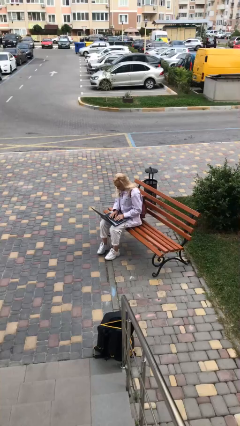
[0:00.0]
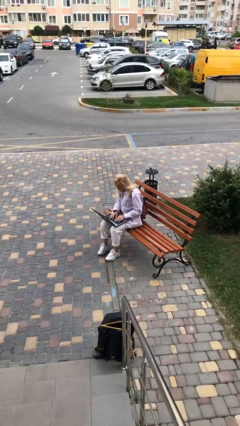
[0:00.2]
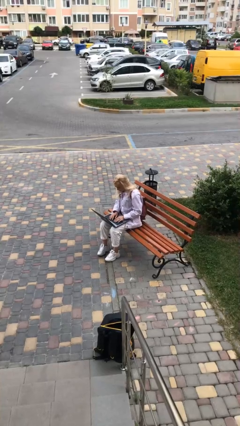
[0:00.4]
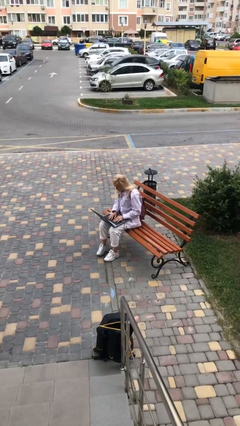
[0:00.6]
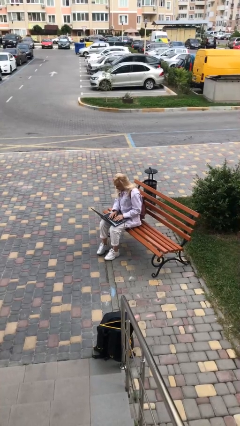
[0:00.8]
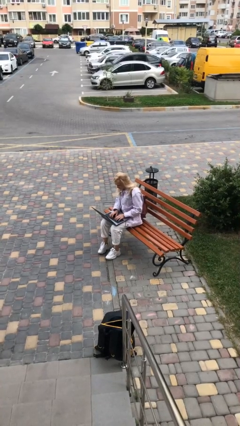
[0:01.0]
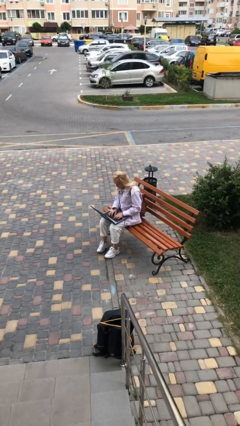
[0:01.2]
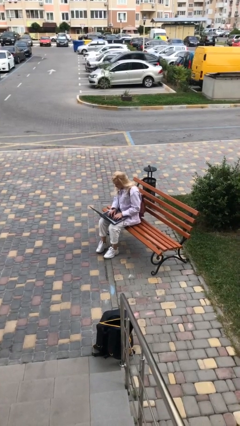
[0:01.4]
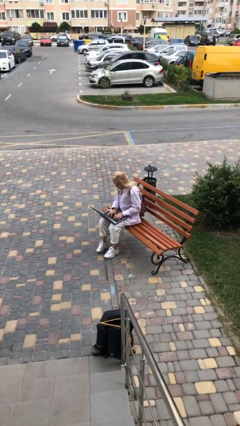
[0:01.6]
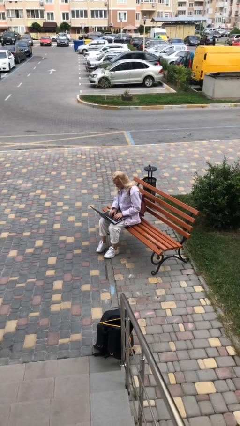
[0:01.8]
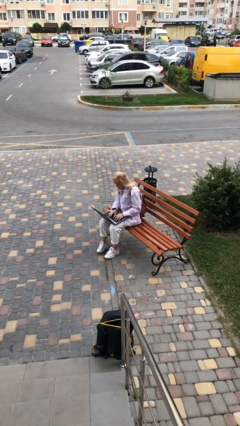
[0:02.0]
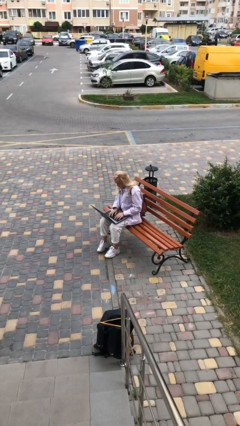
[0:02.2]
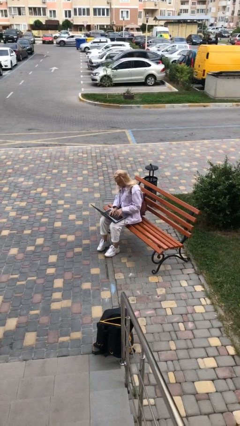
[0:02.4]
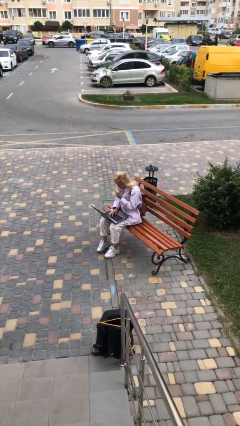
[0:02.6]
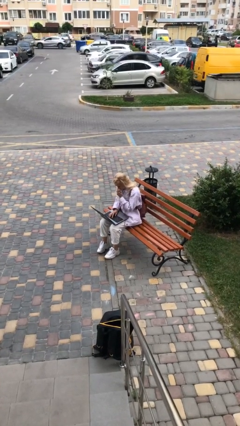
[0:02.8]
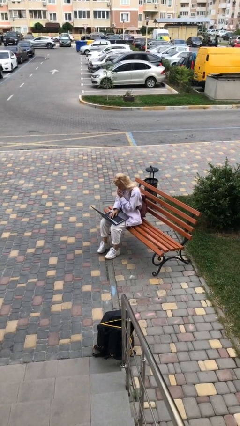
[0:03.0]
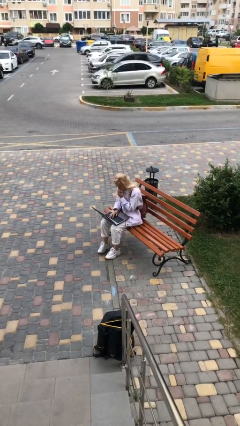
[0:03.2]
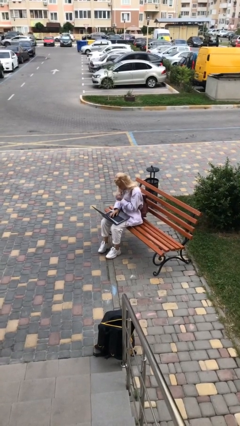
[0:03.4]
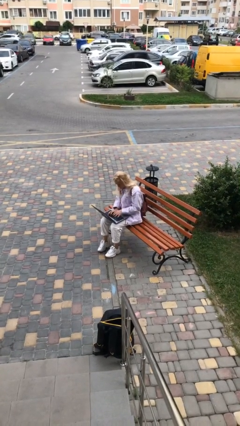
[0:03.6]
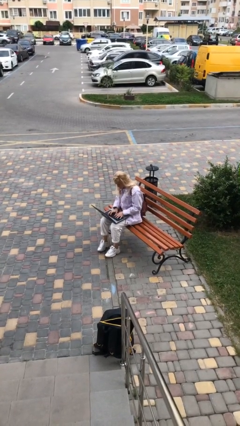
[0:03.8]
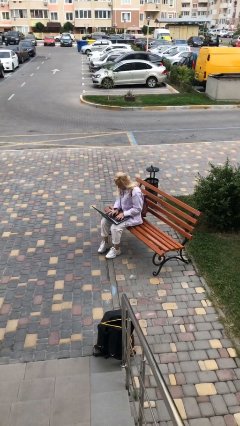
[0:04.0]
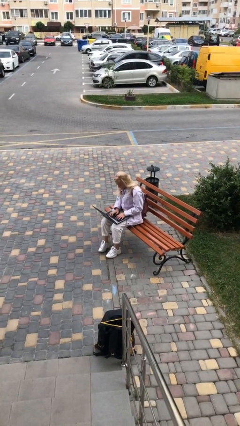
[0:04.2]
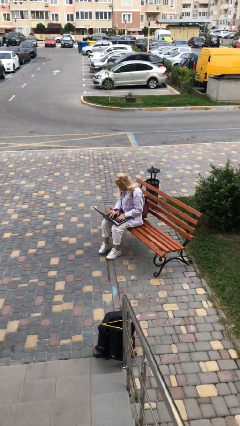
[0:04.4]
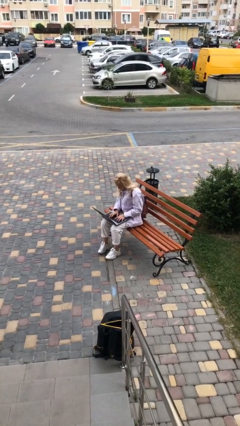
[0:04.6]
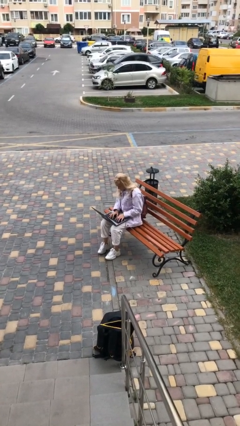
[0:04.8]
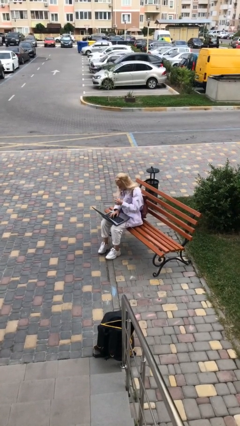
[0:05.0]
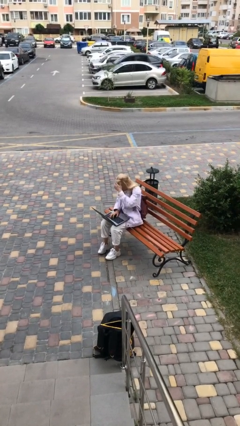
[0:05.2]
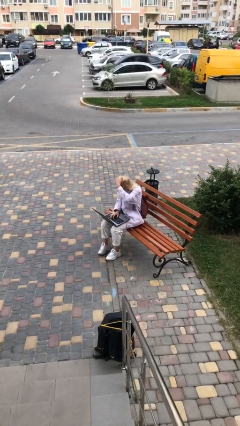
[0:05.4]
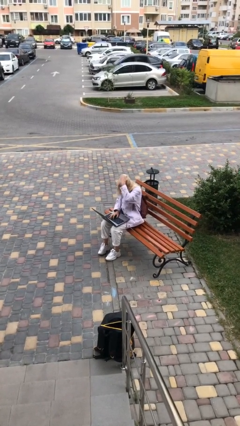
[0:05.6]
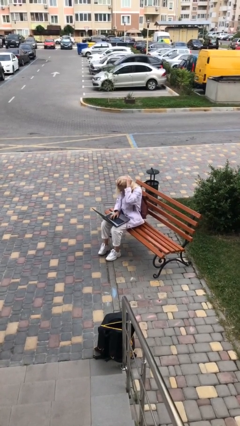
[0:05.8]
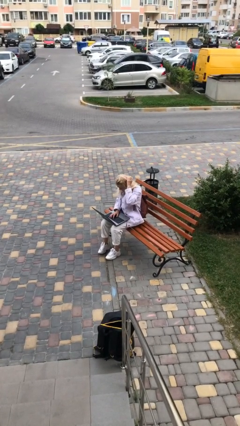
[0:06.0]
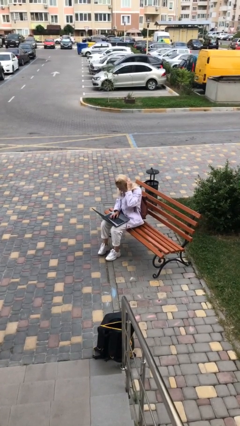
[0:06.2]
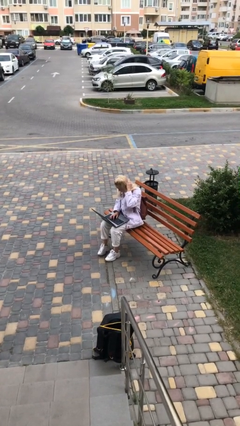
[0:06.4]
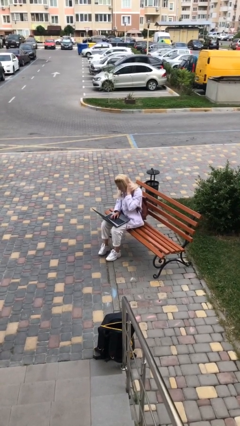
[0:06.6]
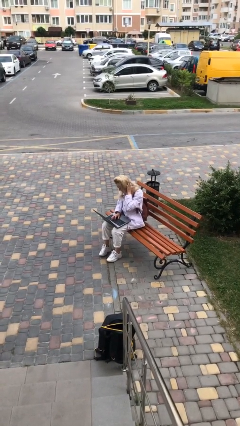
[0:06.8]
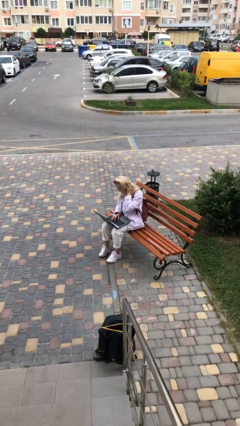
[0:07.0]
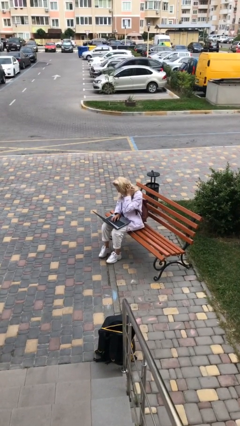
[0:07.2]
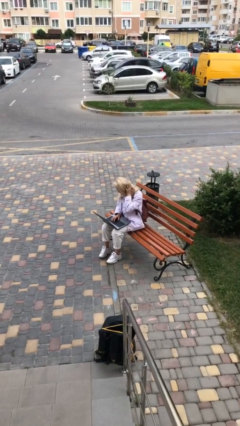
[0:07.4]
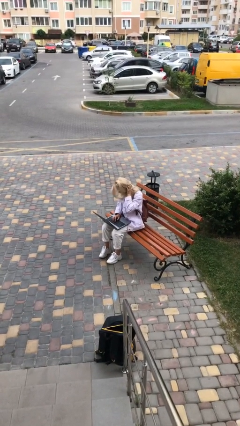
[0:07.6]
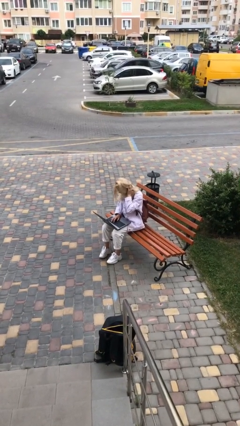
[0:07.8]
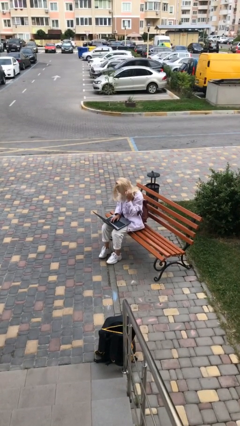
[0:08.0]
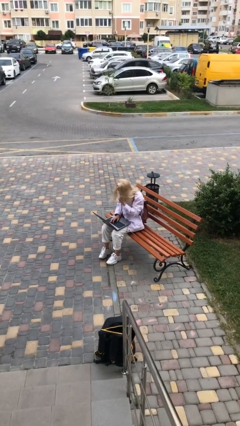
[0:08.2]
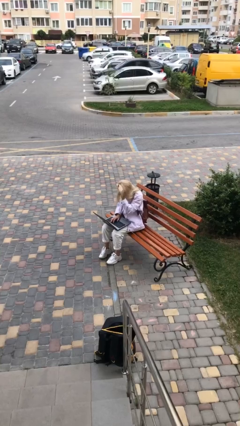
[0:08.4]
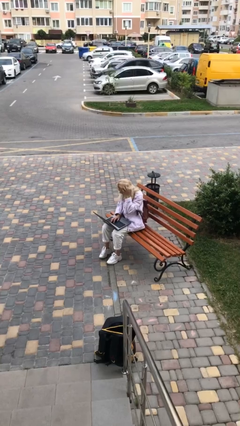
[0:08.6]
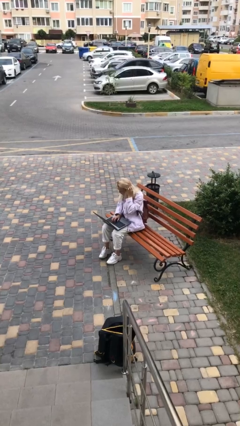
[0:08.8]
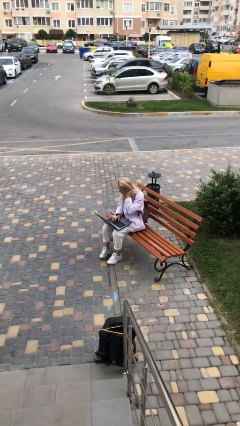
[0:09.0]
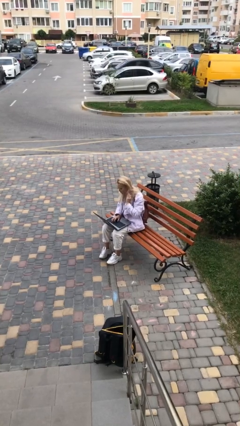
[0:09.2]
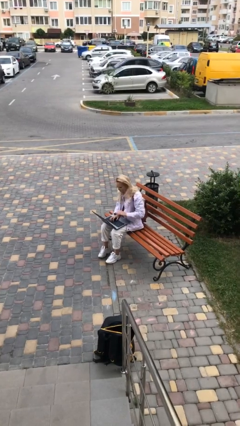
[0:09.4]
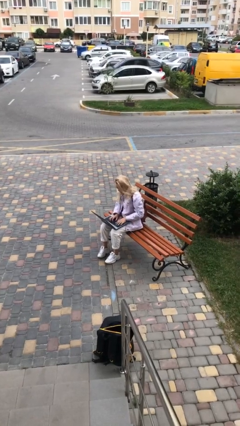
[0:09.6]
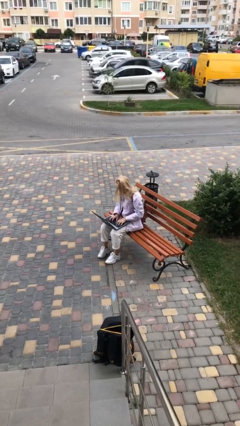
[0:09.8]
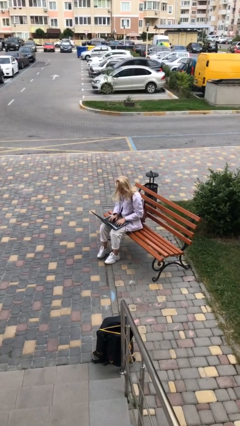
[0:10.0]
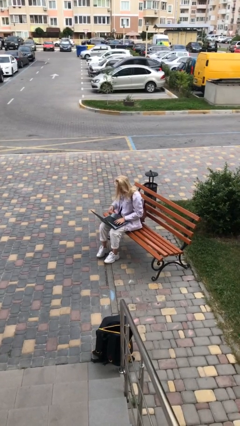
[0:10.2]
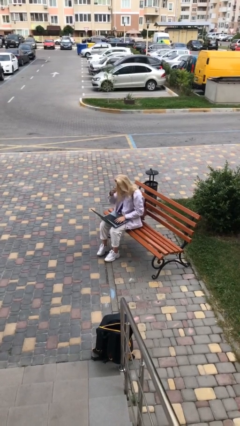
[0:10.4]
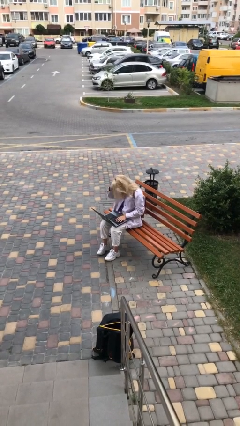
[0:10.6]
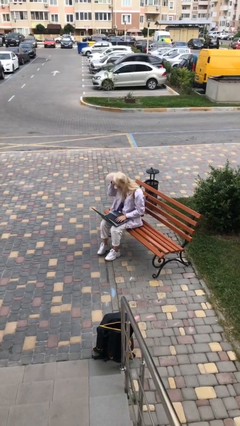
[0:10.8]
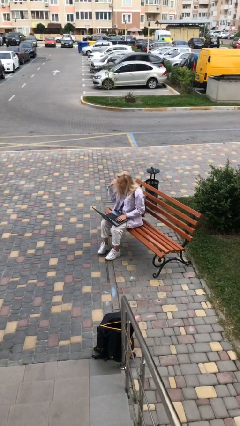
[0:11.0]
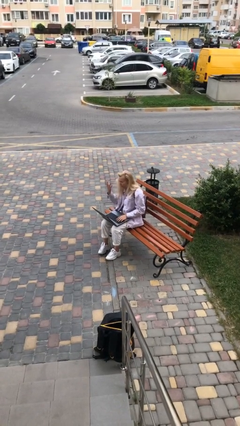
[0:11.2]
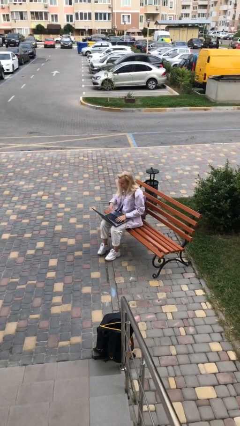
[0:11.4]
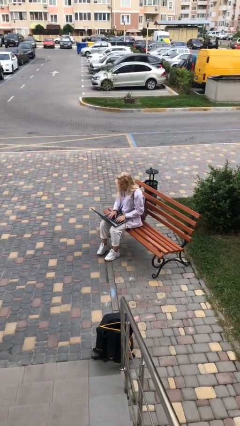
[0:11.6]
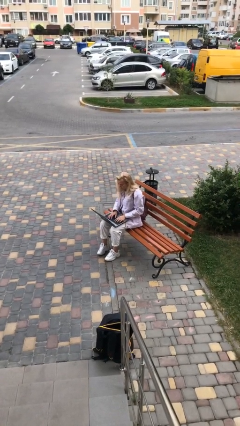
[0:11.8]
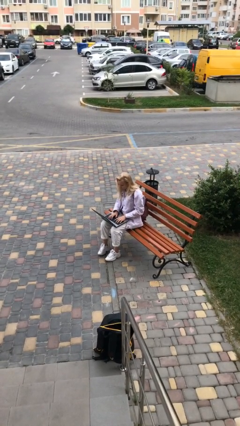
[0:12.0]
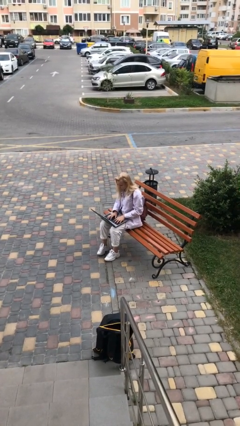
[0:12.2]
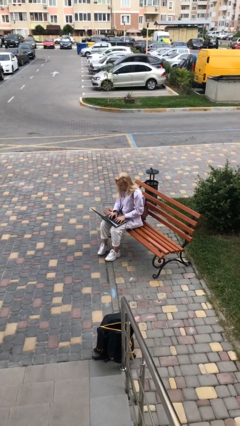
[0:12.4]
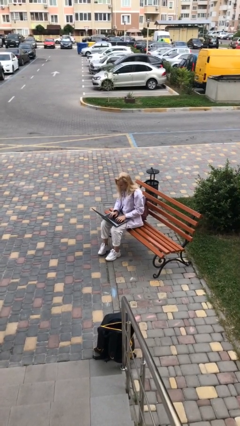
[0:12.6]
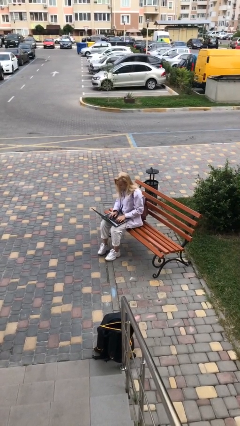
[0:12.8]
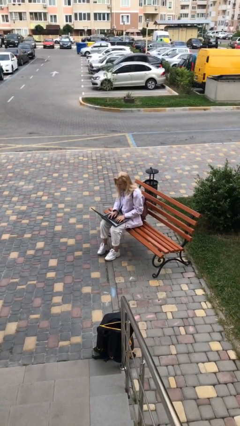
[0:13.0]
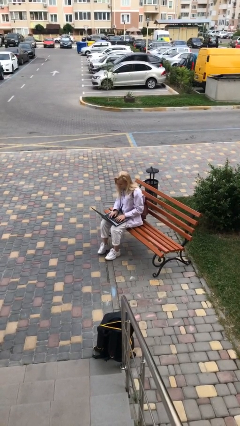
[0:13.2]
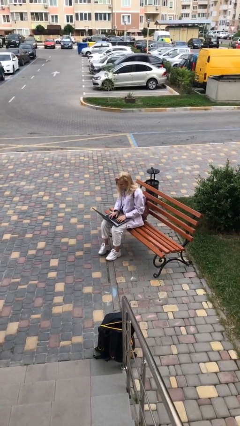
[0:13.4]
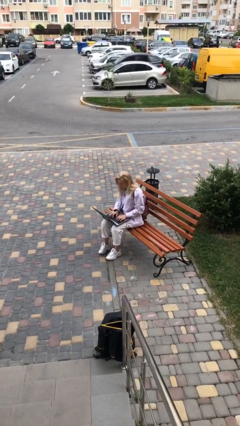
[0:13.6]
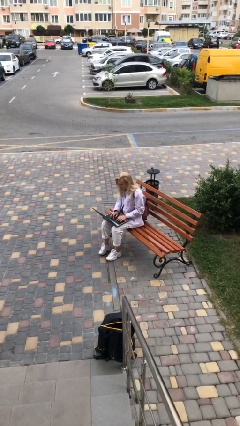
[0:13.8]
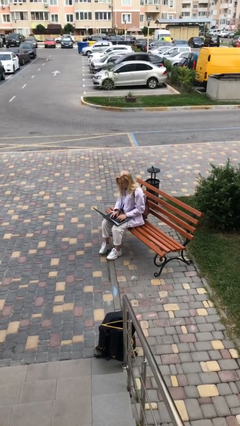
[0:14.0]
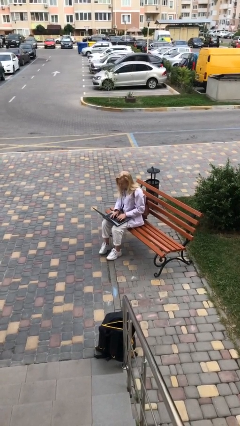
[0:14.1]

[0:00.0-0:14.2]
person interacts with laptop

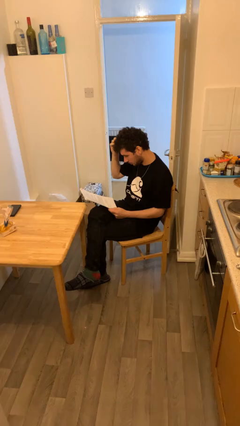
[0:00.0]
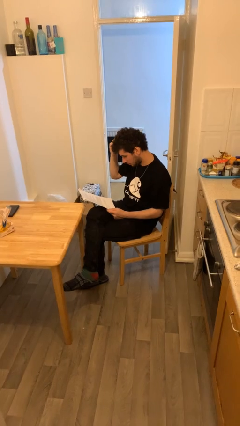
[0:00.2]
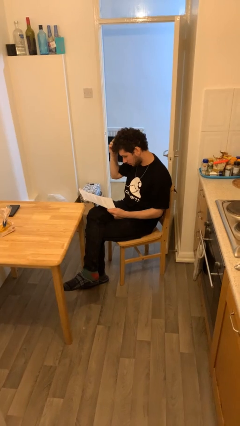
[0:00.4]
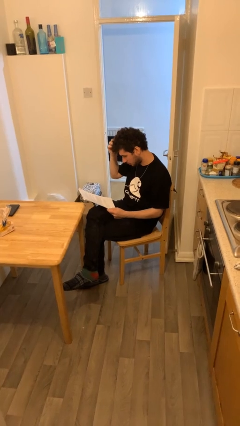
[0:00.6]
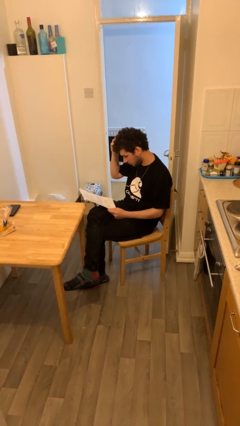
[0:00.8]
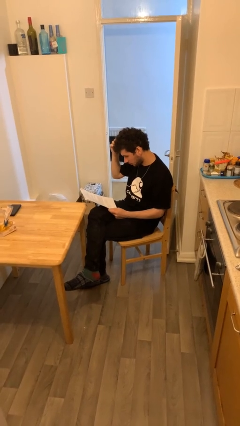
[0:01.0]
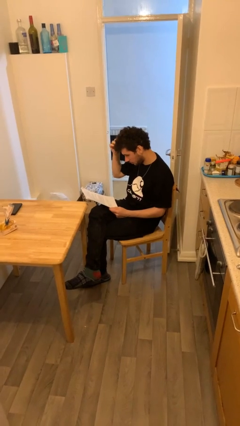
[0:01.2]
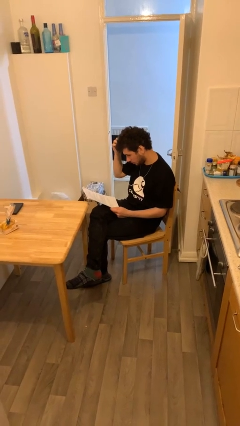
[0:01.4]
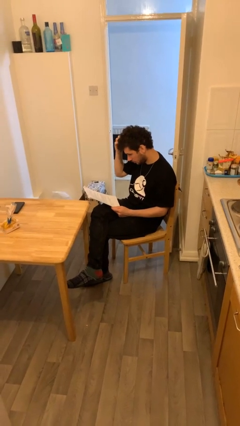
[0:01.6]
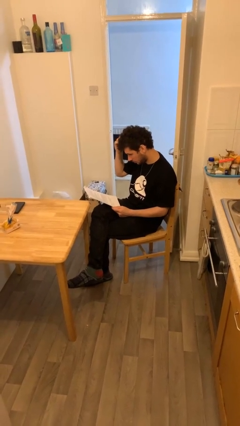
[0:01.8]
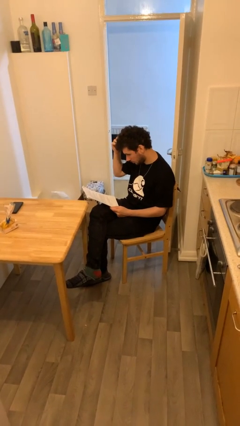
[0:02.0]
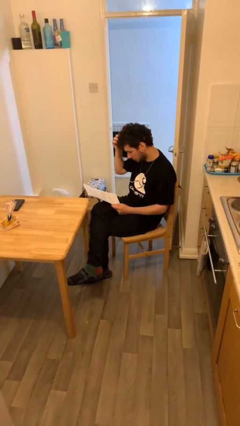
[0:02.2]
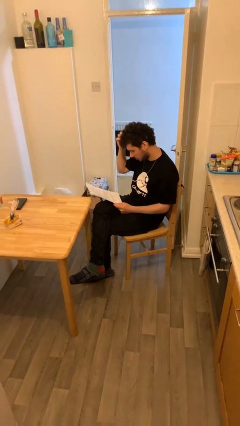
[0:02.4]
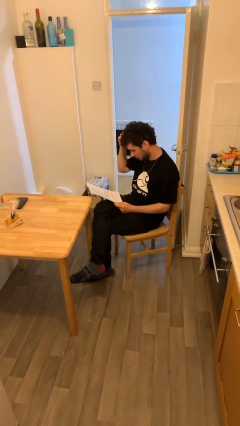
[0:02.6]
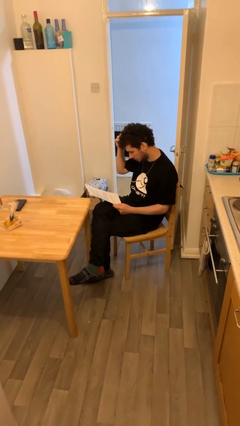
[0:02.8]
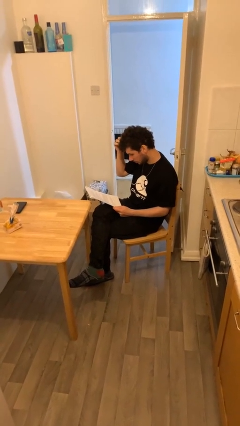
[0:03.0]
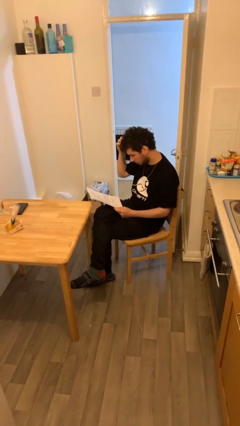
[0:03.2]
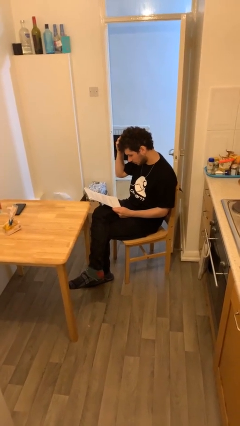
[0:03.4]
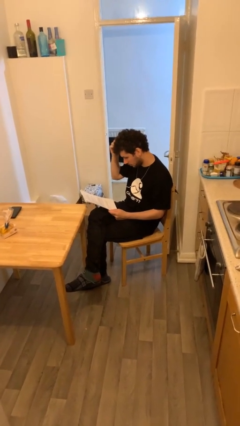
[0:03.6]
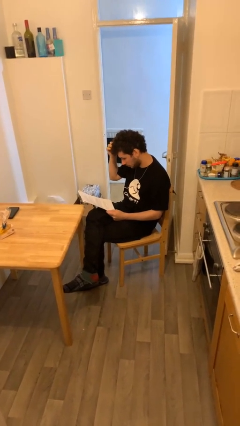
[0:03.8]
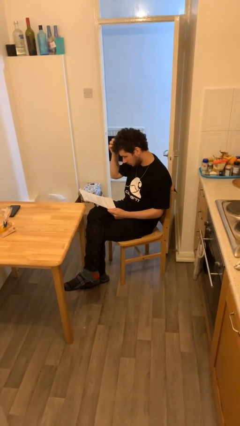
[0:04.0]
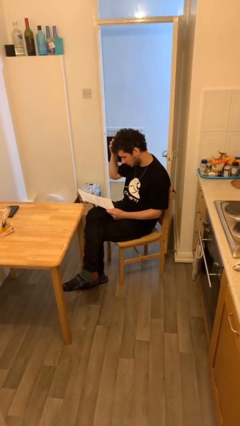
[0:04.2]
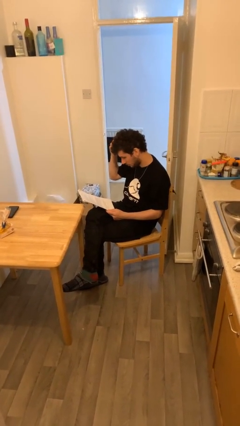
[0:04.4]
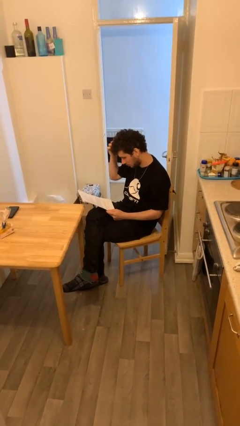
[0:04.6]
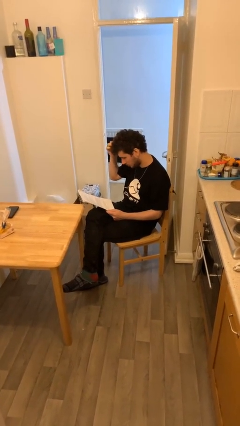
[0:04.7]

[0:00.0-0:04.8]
person reads document
